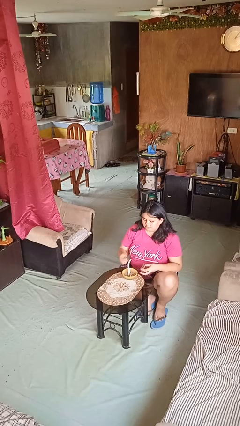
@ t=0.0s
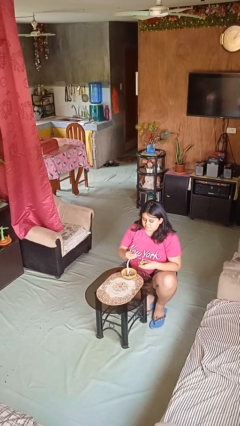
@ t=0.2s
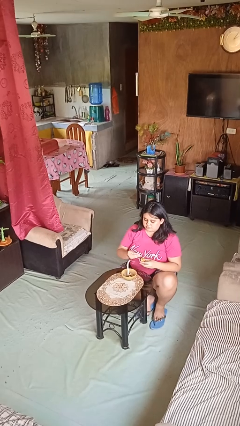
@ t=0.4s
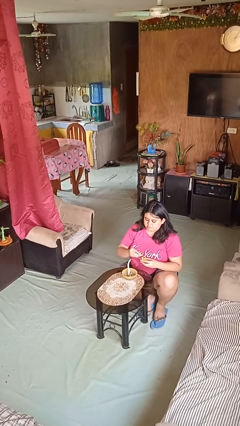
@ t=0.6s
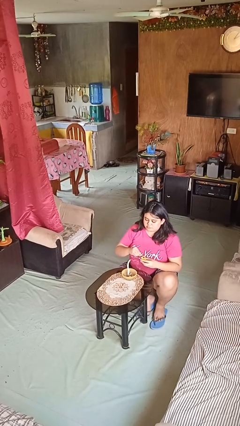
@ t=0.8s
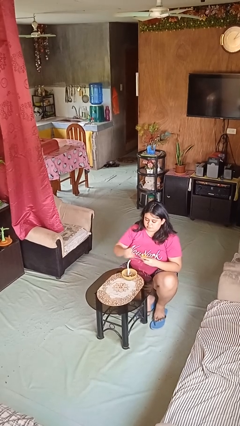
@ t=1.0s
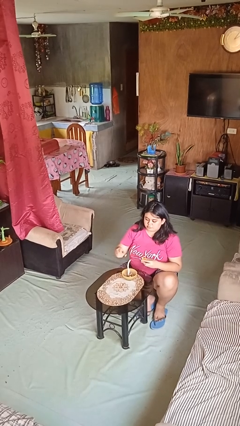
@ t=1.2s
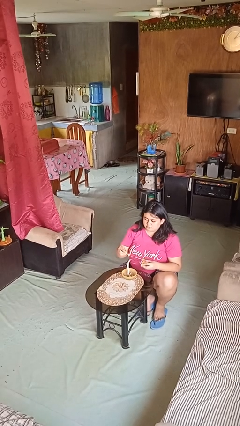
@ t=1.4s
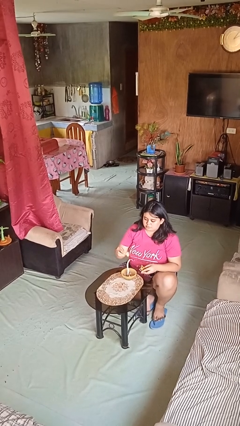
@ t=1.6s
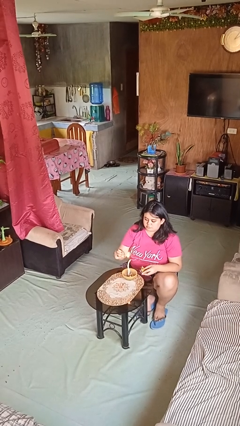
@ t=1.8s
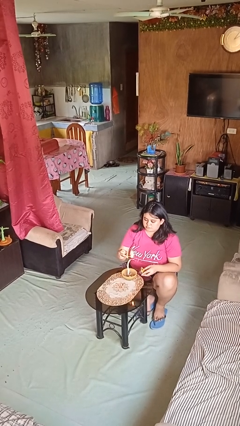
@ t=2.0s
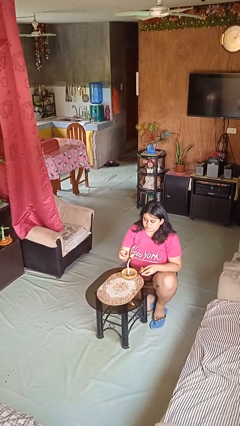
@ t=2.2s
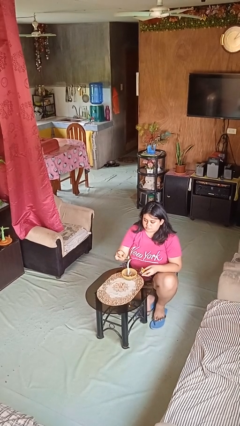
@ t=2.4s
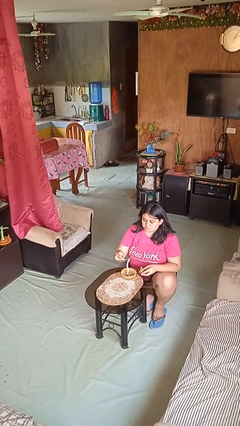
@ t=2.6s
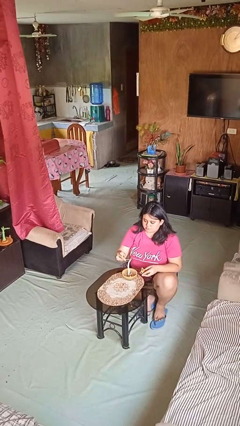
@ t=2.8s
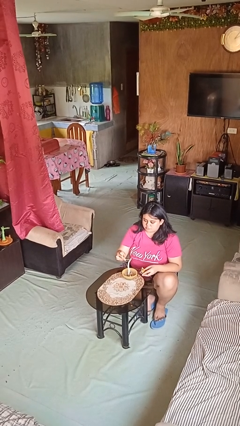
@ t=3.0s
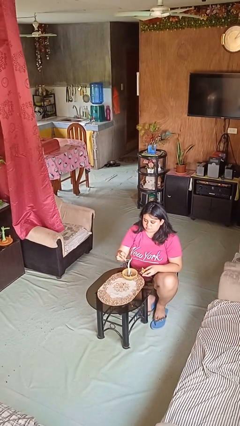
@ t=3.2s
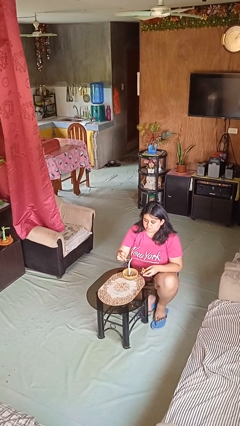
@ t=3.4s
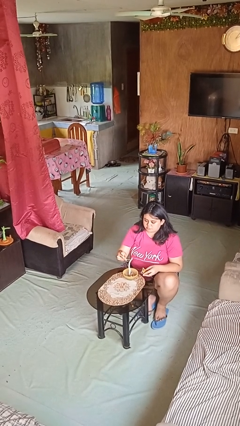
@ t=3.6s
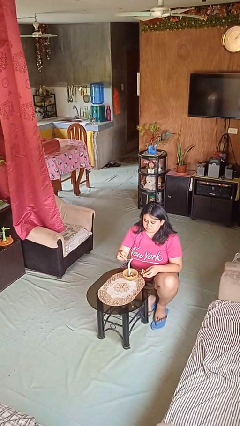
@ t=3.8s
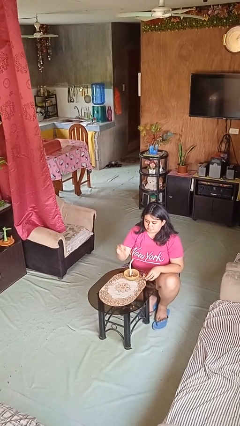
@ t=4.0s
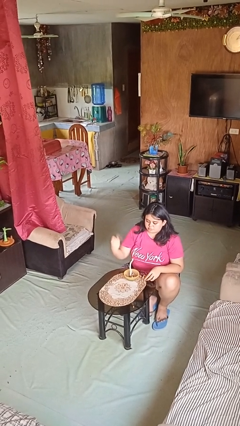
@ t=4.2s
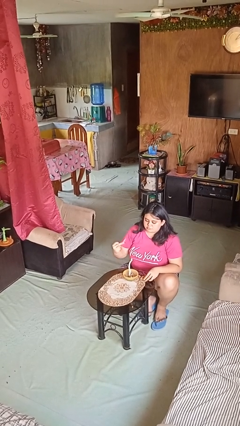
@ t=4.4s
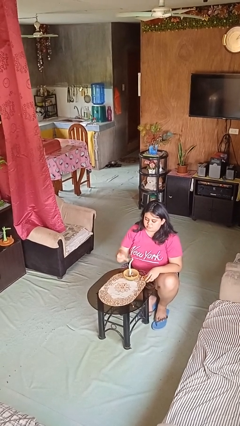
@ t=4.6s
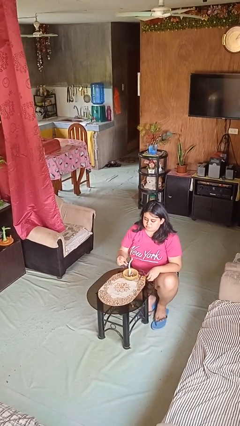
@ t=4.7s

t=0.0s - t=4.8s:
person lights candle

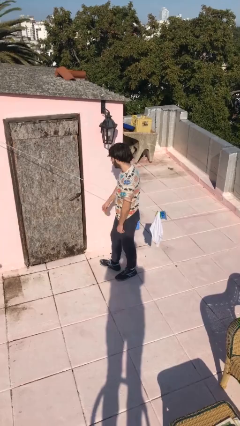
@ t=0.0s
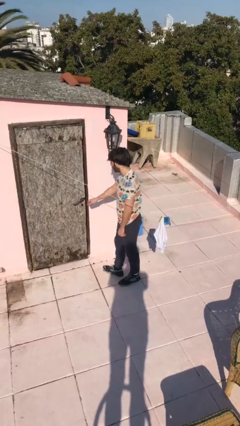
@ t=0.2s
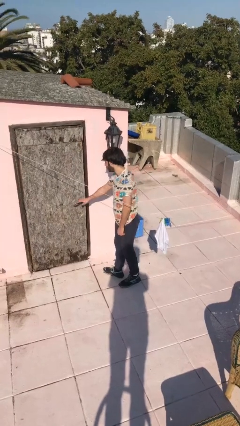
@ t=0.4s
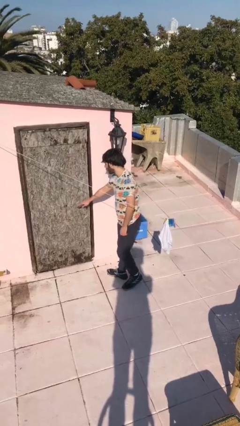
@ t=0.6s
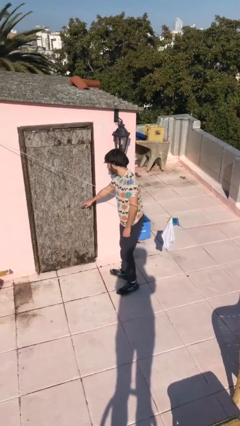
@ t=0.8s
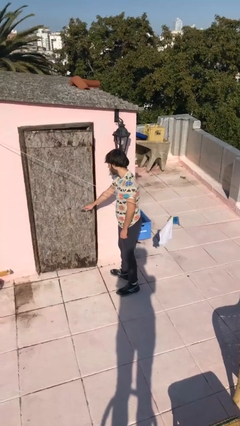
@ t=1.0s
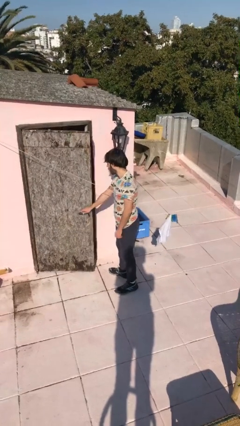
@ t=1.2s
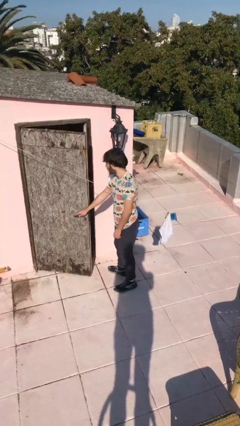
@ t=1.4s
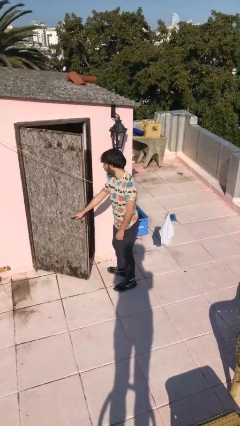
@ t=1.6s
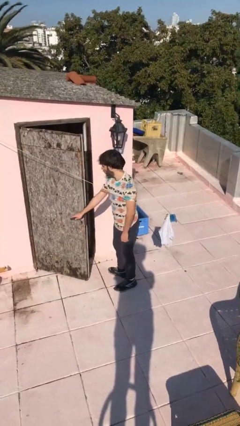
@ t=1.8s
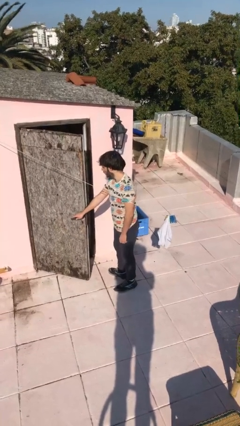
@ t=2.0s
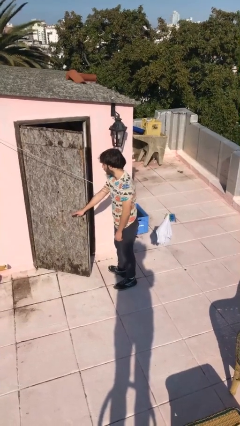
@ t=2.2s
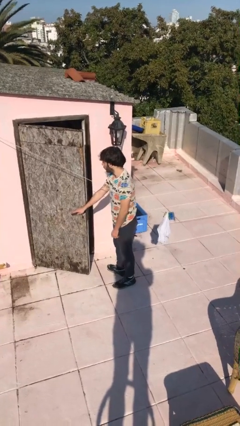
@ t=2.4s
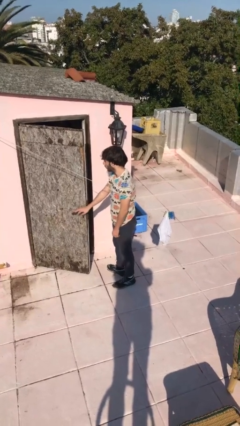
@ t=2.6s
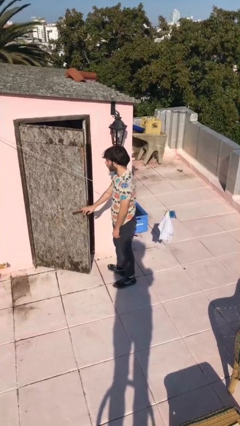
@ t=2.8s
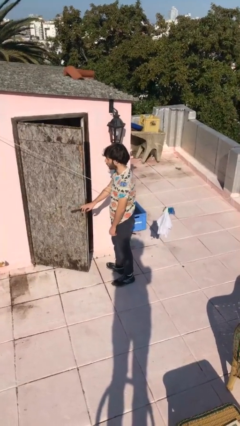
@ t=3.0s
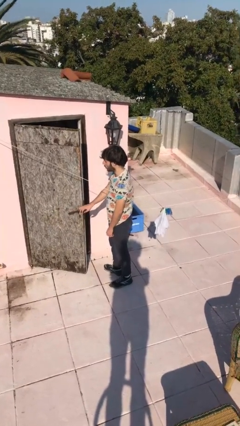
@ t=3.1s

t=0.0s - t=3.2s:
person opens facility door

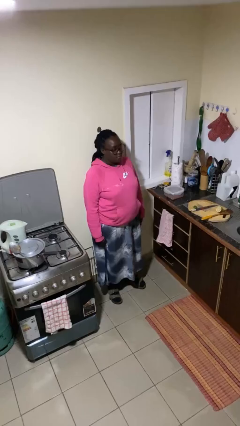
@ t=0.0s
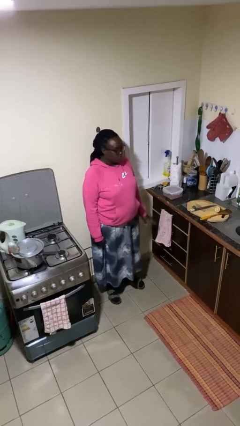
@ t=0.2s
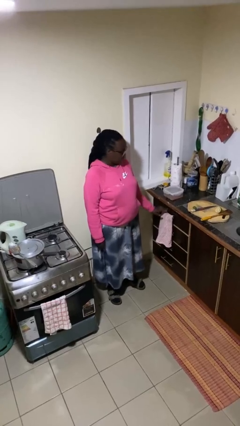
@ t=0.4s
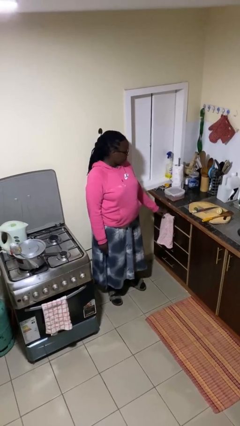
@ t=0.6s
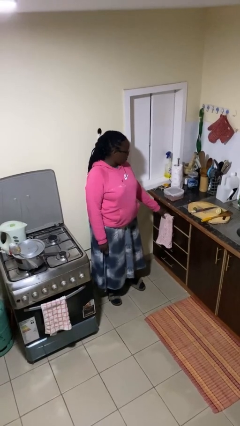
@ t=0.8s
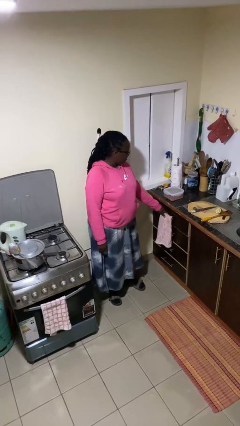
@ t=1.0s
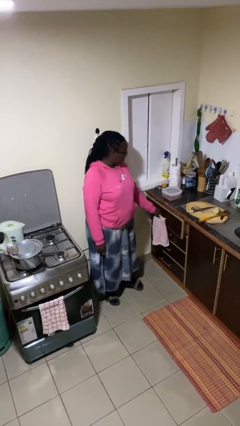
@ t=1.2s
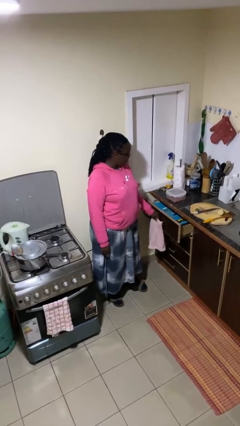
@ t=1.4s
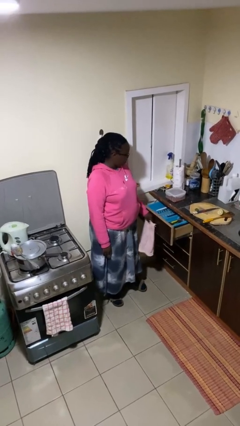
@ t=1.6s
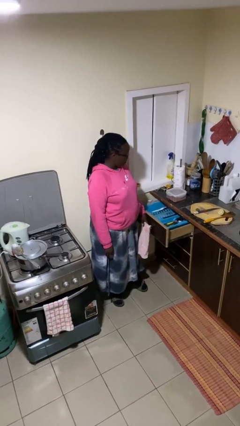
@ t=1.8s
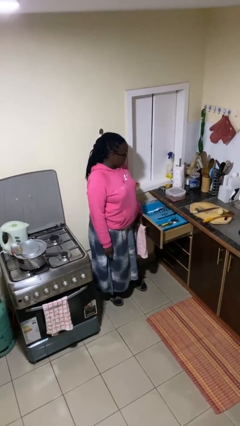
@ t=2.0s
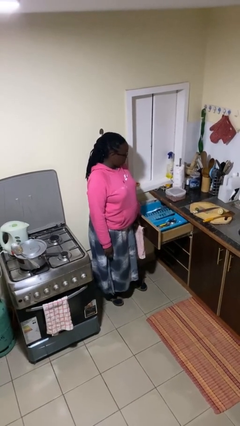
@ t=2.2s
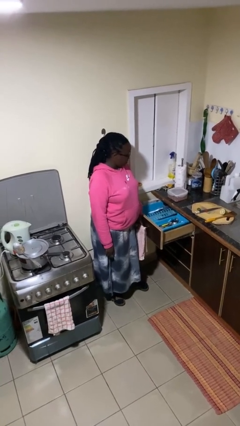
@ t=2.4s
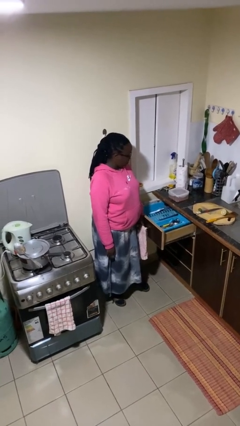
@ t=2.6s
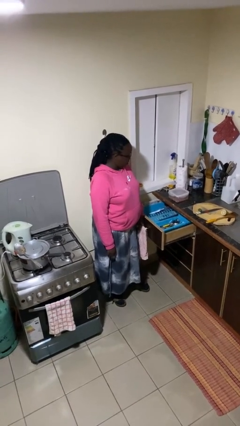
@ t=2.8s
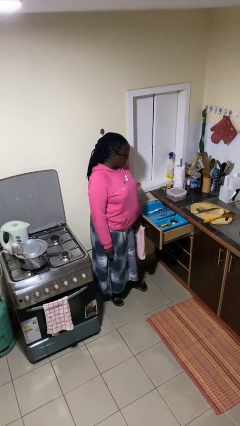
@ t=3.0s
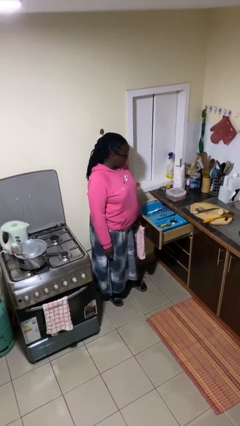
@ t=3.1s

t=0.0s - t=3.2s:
person opens kitchen drawer

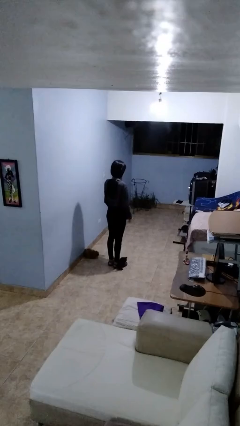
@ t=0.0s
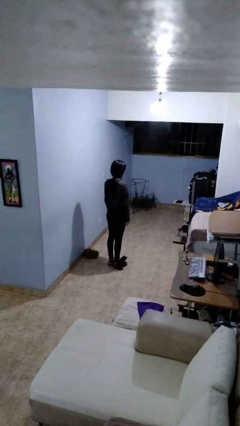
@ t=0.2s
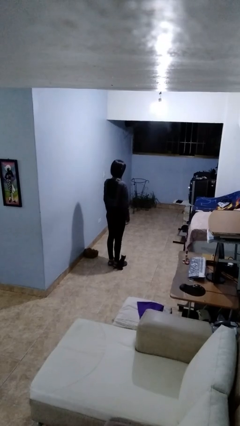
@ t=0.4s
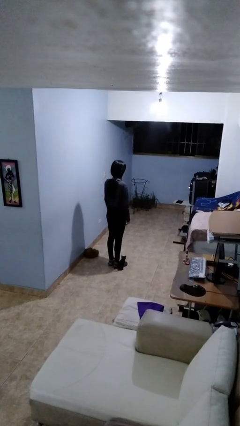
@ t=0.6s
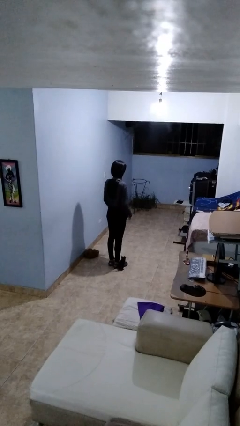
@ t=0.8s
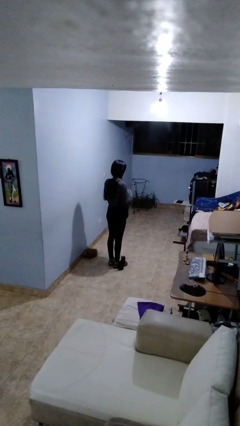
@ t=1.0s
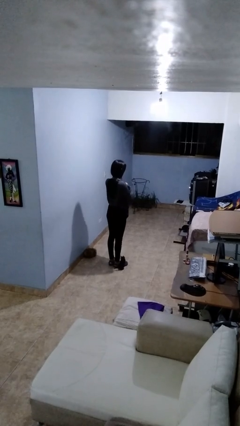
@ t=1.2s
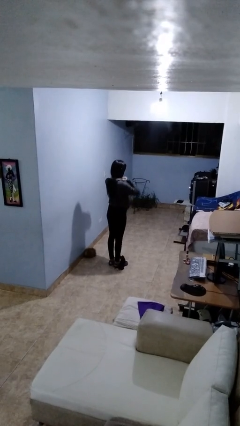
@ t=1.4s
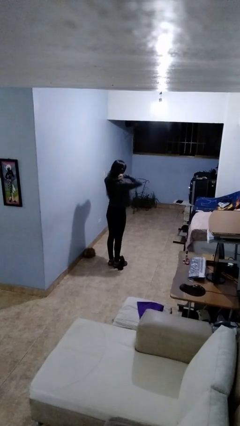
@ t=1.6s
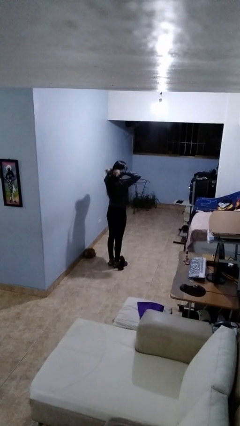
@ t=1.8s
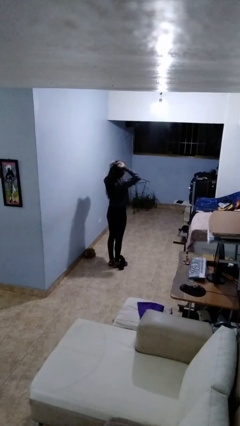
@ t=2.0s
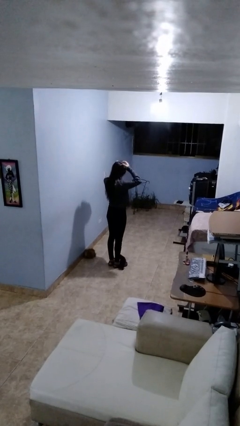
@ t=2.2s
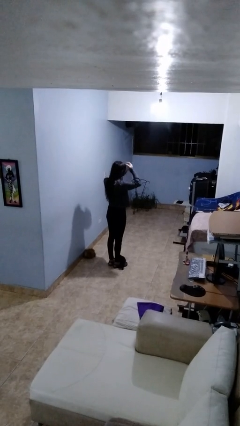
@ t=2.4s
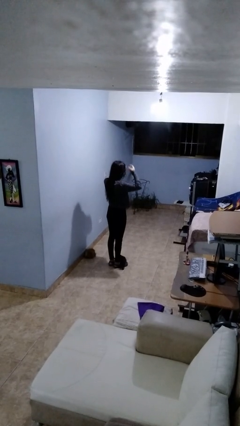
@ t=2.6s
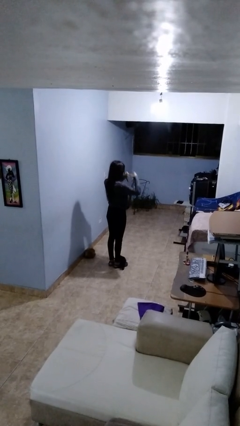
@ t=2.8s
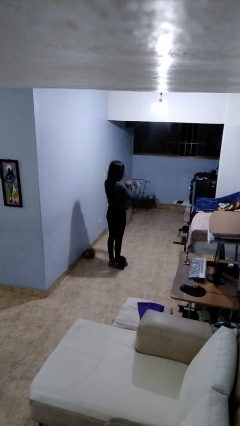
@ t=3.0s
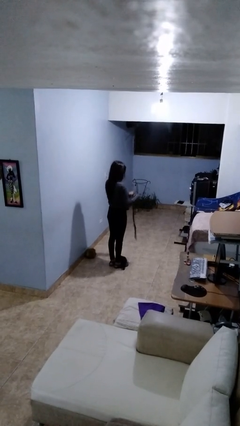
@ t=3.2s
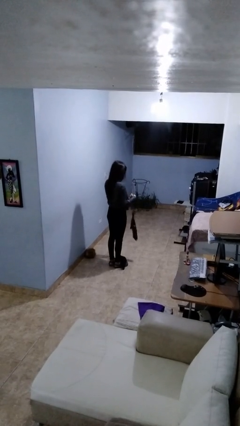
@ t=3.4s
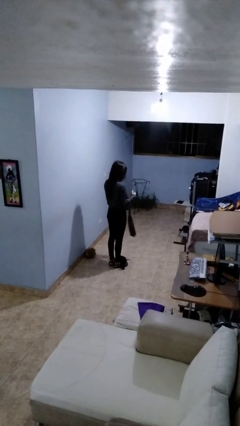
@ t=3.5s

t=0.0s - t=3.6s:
person takes off necktie

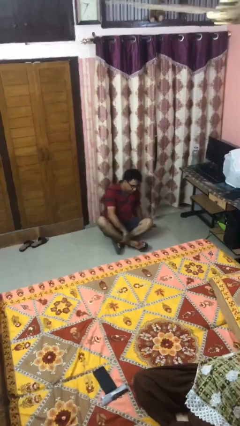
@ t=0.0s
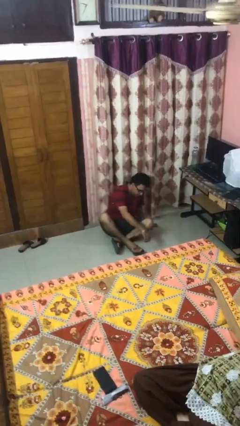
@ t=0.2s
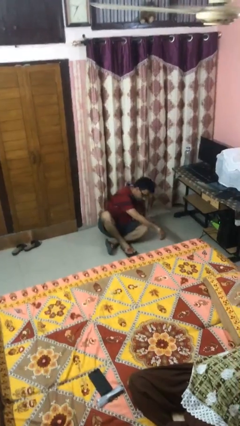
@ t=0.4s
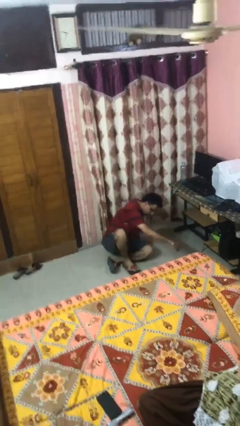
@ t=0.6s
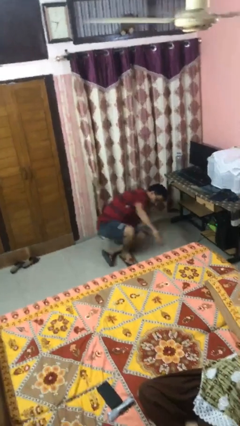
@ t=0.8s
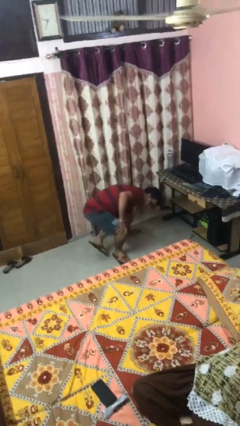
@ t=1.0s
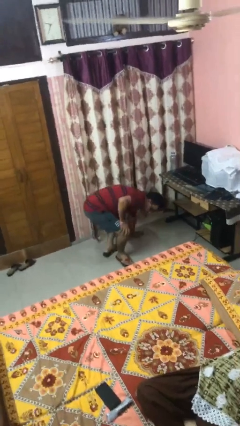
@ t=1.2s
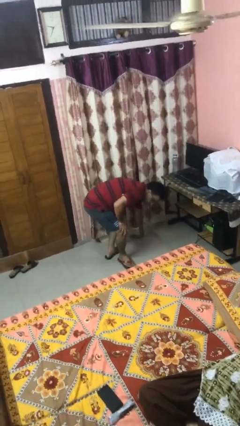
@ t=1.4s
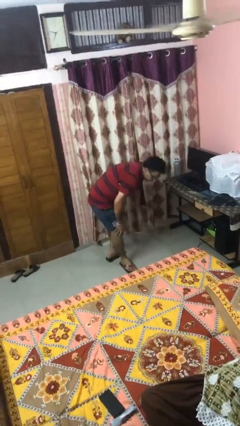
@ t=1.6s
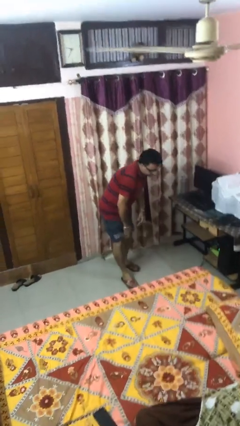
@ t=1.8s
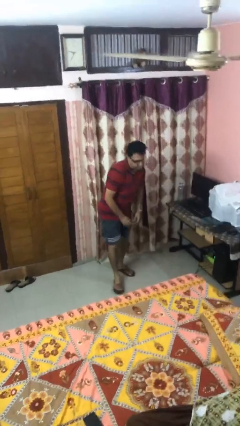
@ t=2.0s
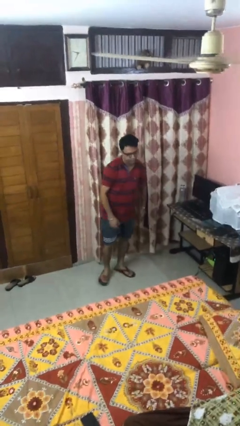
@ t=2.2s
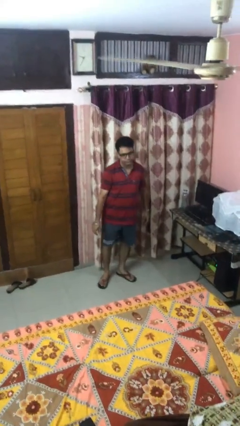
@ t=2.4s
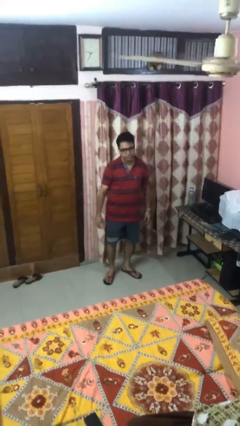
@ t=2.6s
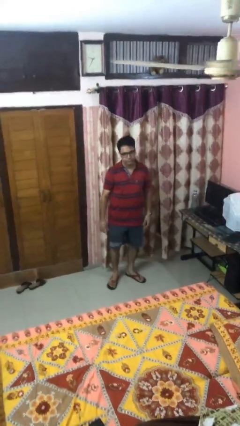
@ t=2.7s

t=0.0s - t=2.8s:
person stands up from floor
